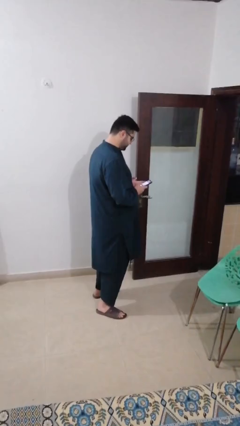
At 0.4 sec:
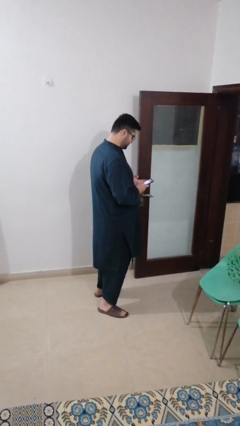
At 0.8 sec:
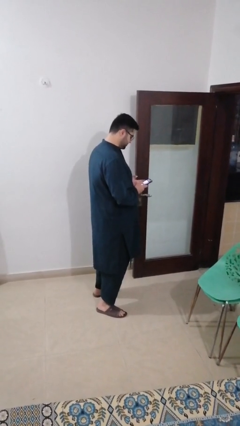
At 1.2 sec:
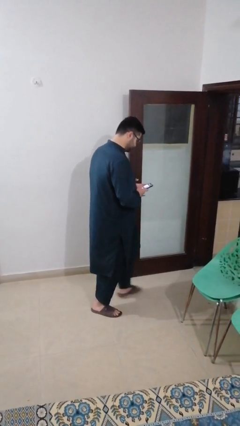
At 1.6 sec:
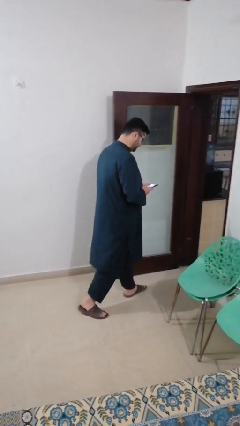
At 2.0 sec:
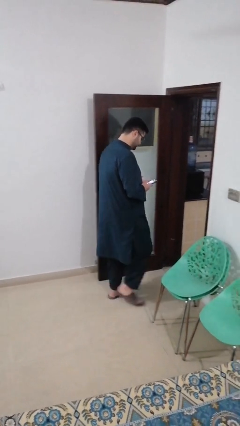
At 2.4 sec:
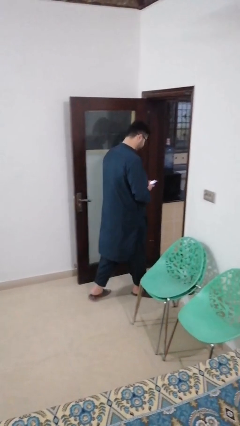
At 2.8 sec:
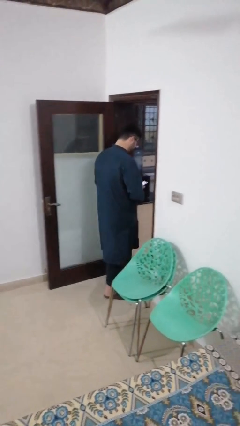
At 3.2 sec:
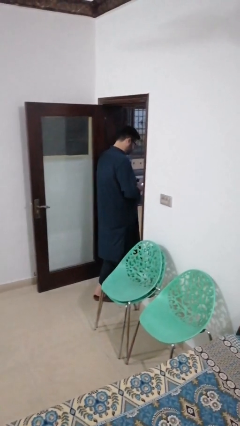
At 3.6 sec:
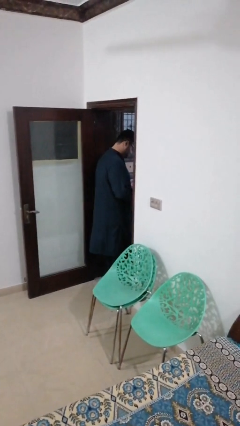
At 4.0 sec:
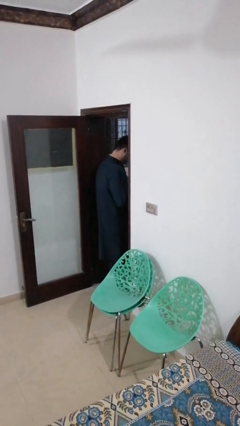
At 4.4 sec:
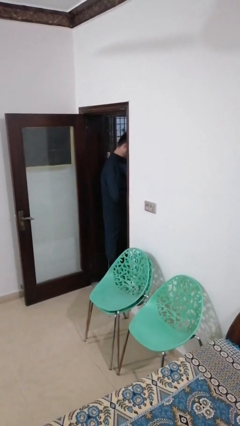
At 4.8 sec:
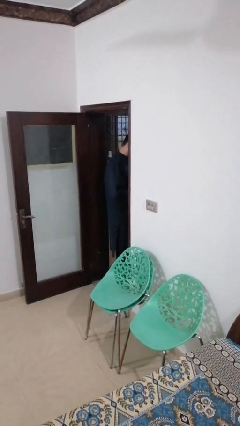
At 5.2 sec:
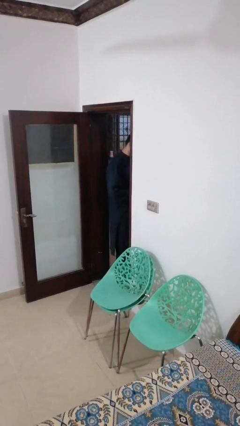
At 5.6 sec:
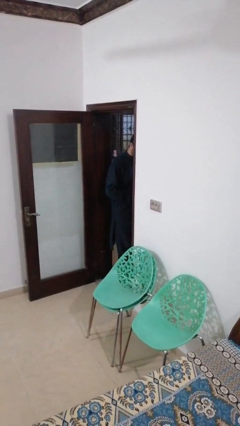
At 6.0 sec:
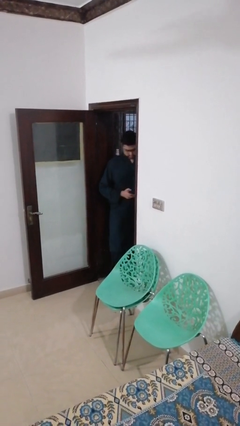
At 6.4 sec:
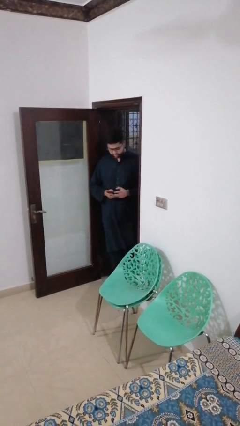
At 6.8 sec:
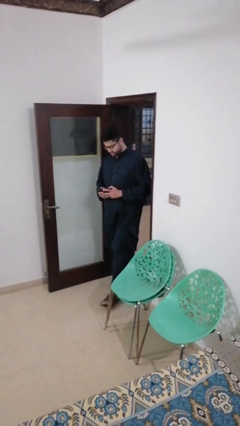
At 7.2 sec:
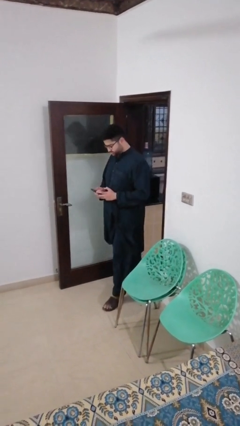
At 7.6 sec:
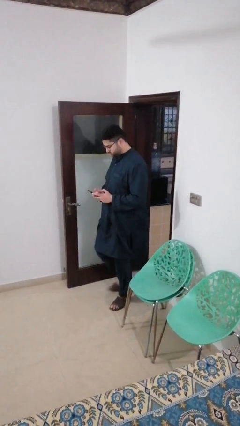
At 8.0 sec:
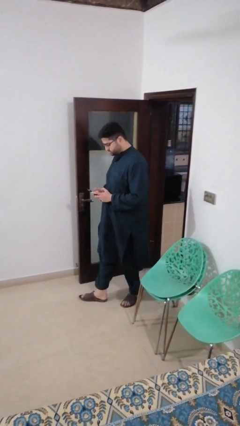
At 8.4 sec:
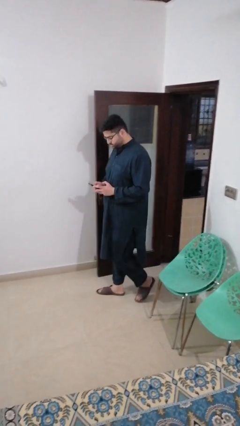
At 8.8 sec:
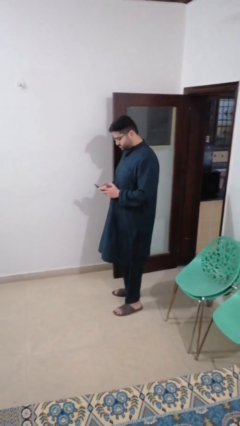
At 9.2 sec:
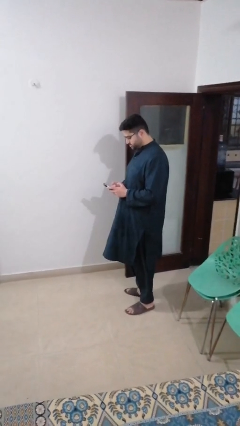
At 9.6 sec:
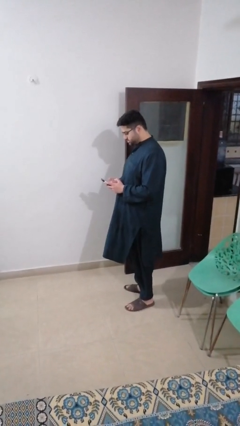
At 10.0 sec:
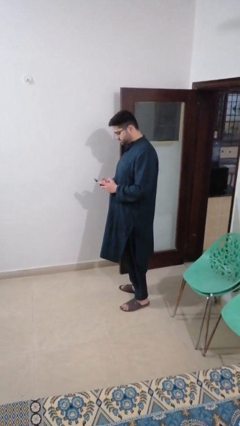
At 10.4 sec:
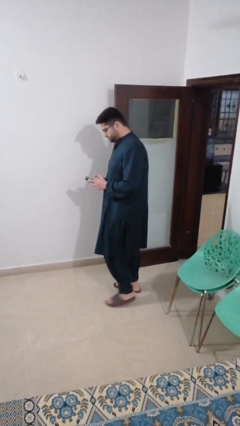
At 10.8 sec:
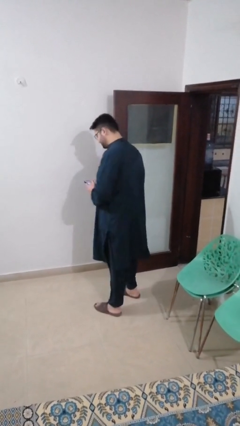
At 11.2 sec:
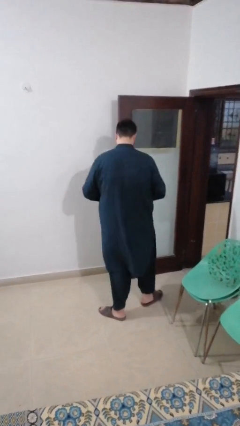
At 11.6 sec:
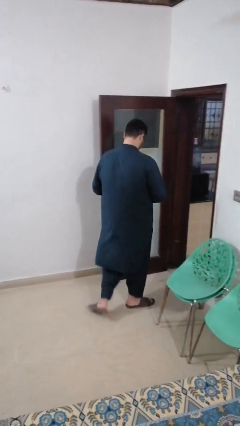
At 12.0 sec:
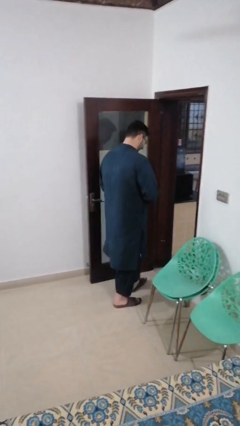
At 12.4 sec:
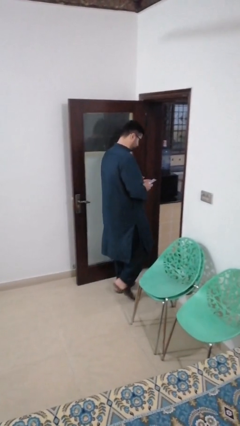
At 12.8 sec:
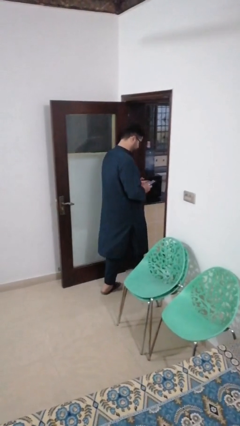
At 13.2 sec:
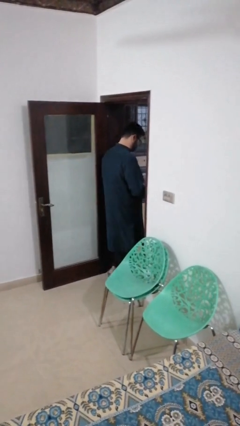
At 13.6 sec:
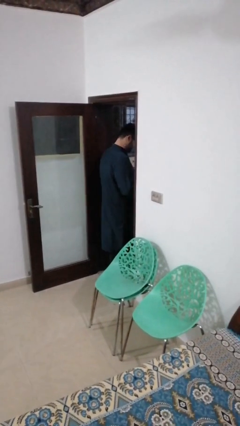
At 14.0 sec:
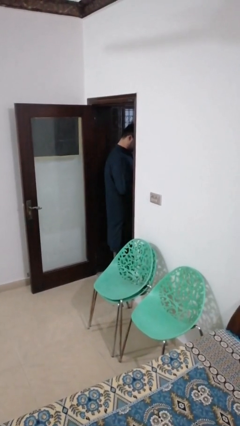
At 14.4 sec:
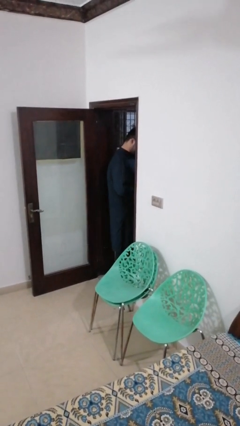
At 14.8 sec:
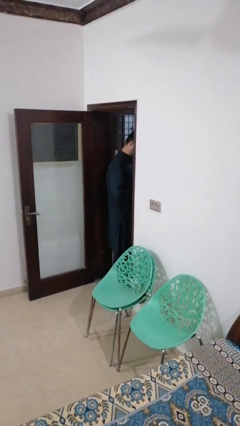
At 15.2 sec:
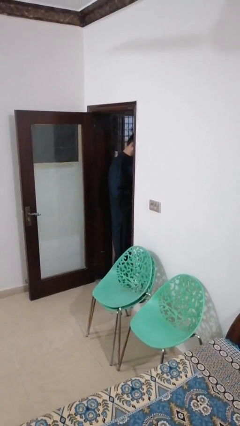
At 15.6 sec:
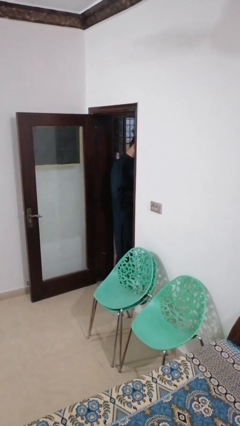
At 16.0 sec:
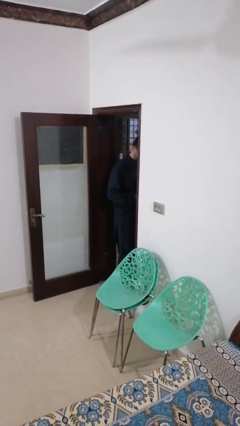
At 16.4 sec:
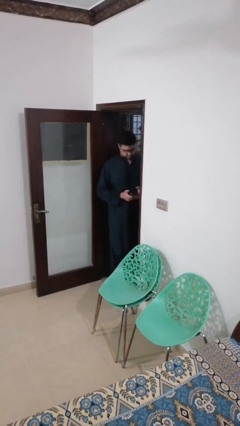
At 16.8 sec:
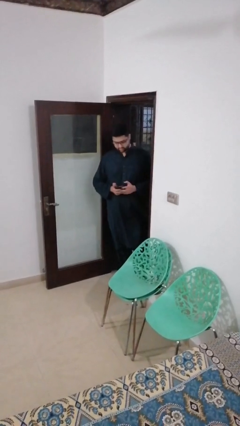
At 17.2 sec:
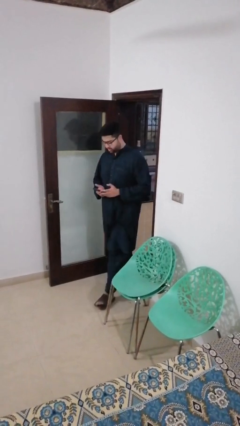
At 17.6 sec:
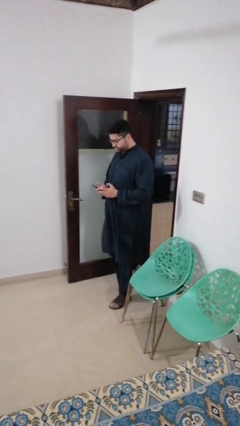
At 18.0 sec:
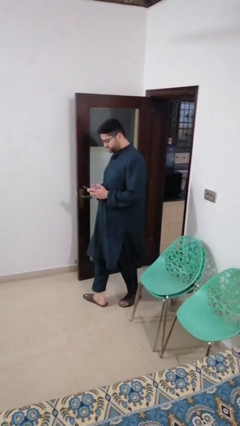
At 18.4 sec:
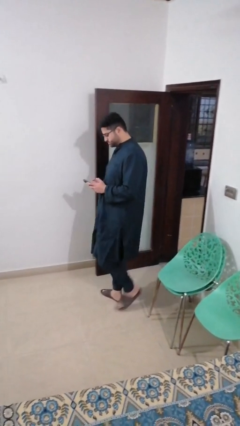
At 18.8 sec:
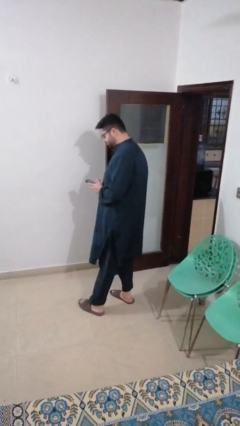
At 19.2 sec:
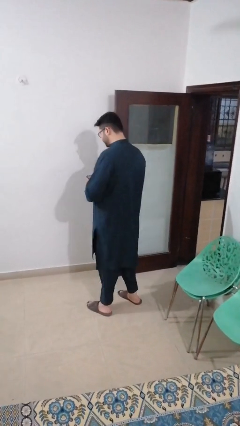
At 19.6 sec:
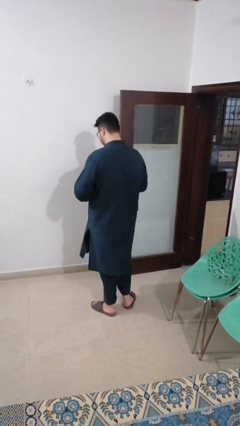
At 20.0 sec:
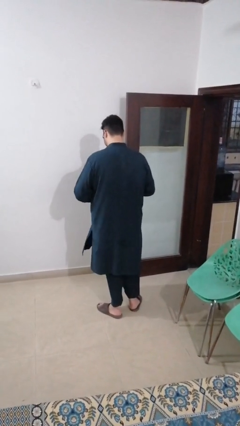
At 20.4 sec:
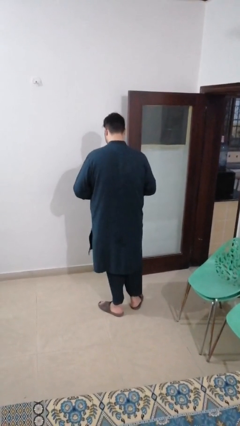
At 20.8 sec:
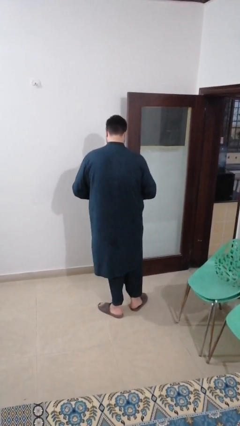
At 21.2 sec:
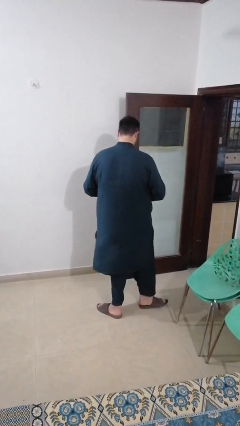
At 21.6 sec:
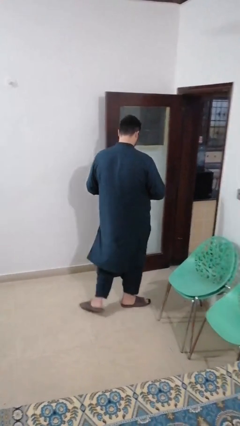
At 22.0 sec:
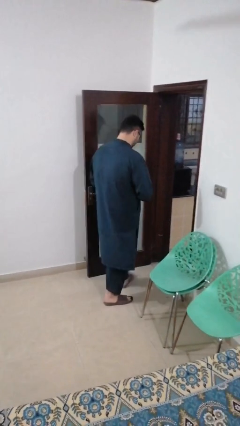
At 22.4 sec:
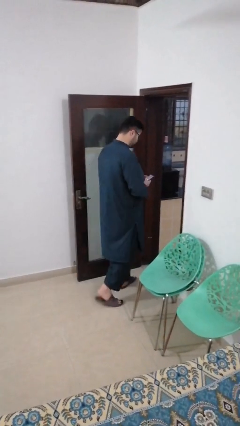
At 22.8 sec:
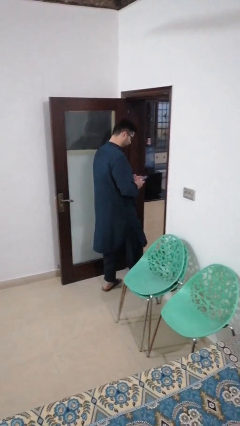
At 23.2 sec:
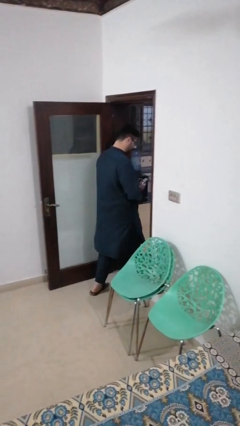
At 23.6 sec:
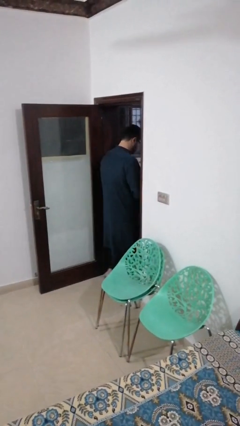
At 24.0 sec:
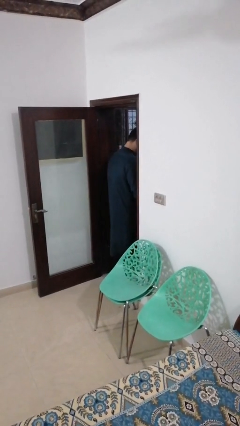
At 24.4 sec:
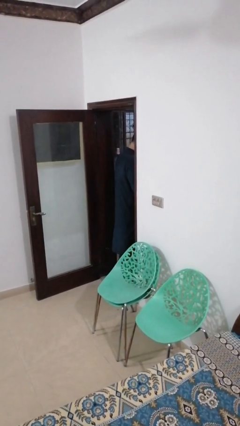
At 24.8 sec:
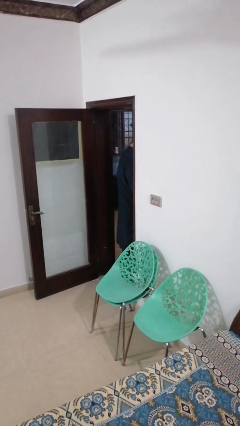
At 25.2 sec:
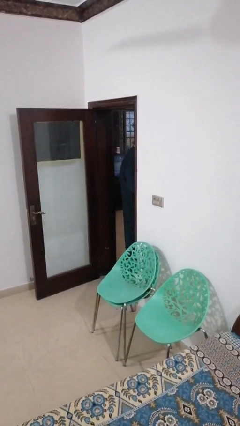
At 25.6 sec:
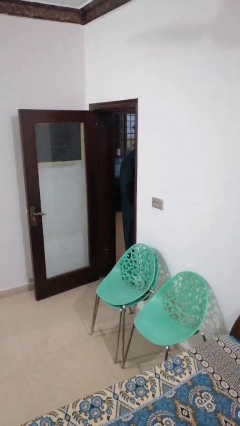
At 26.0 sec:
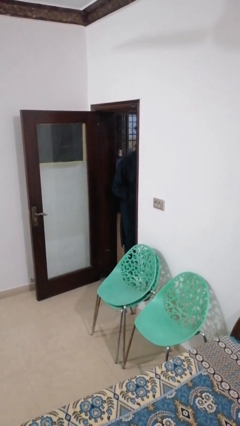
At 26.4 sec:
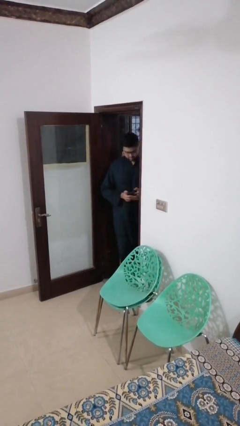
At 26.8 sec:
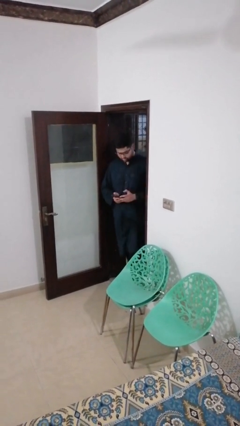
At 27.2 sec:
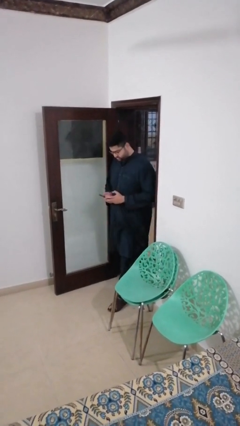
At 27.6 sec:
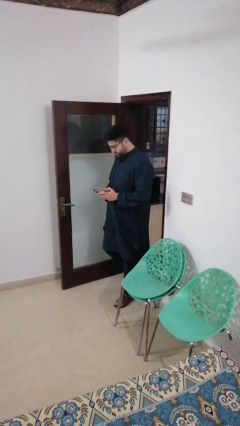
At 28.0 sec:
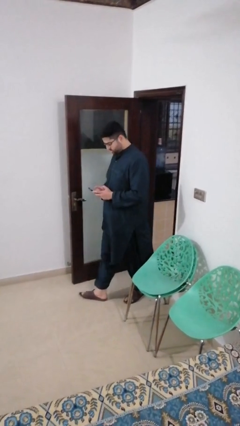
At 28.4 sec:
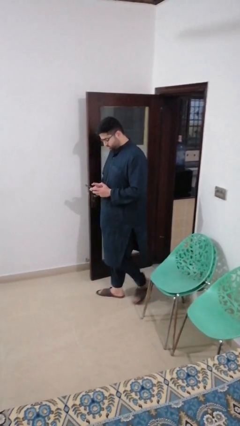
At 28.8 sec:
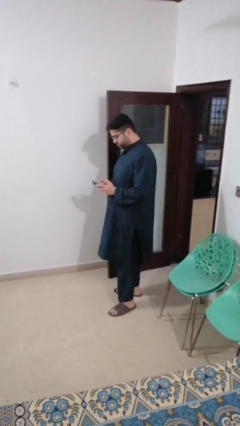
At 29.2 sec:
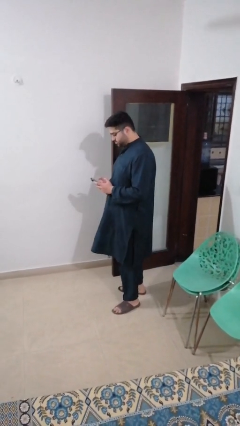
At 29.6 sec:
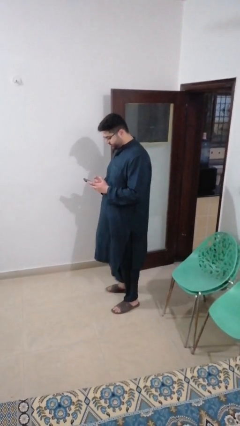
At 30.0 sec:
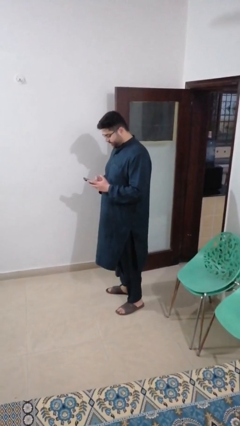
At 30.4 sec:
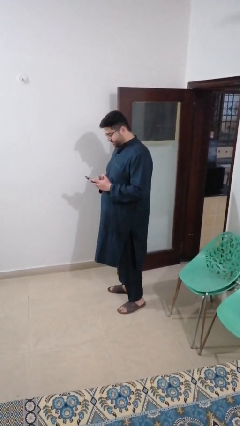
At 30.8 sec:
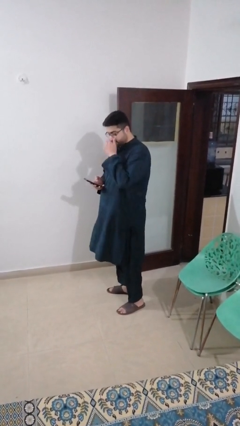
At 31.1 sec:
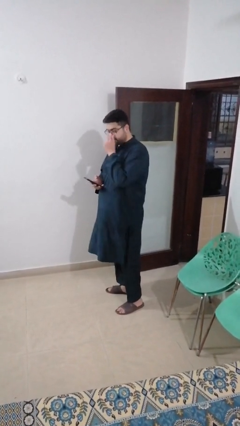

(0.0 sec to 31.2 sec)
person texts on phone

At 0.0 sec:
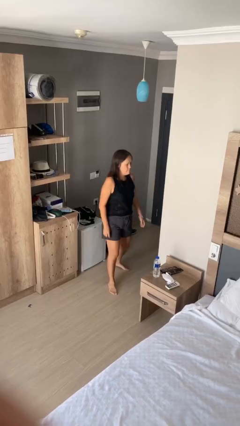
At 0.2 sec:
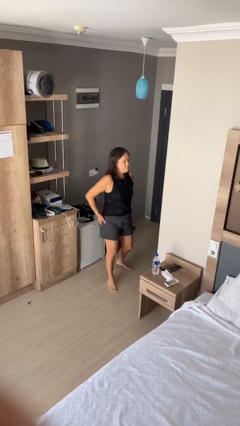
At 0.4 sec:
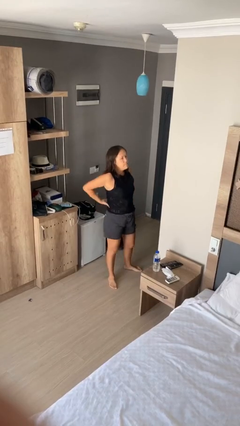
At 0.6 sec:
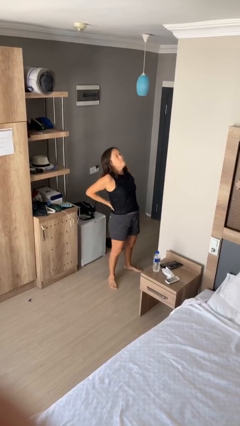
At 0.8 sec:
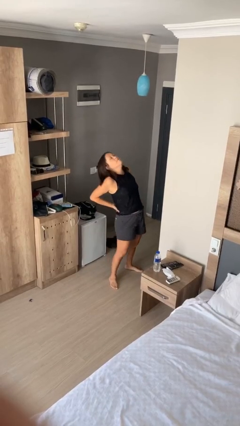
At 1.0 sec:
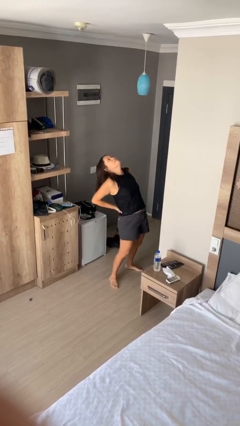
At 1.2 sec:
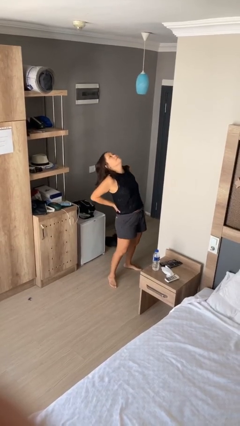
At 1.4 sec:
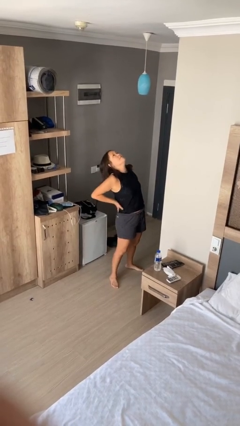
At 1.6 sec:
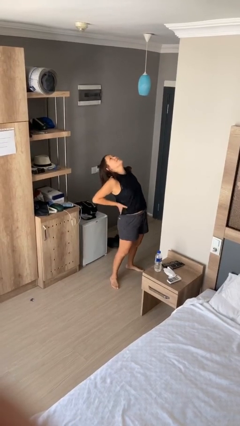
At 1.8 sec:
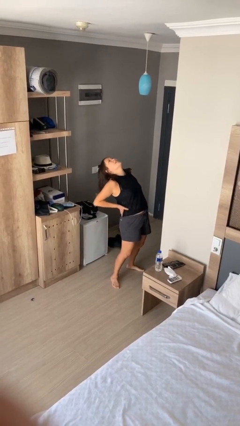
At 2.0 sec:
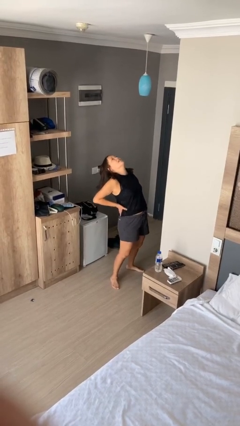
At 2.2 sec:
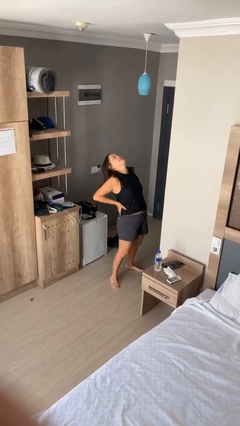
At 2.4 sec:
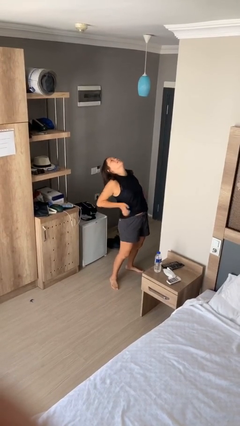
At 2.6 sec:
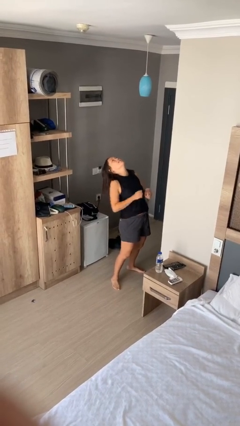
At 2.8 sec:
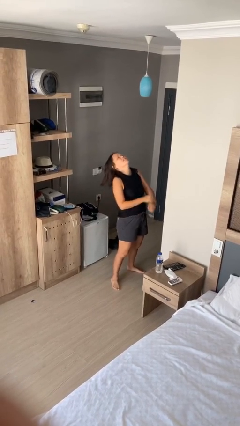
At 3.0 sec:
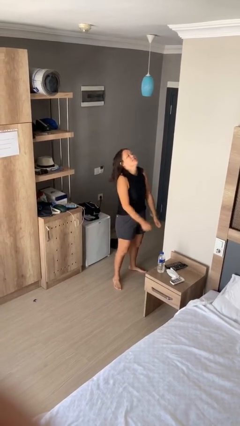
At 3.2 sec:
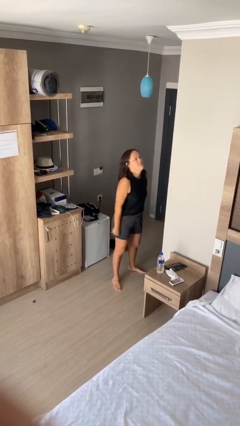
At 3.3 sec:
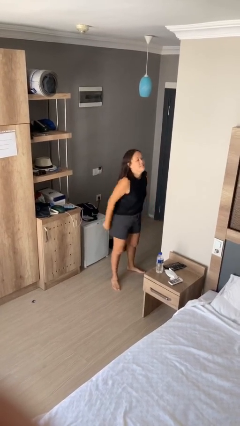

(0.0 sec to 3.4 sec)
person stretches back
